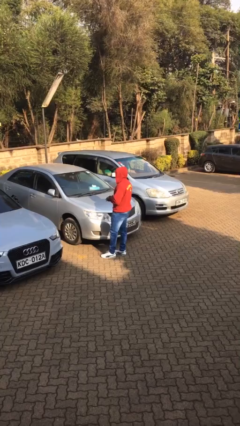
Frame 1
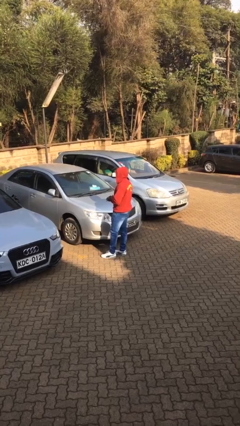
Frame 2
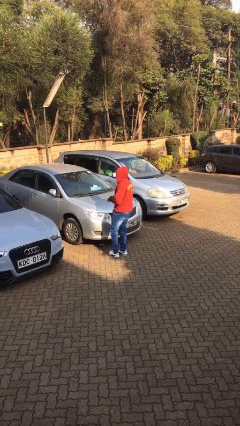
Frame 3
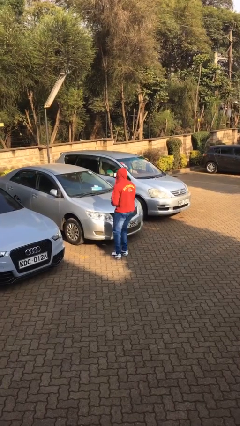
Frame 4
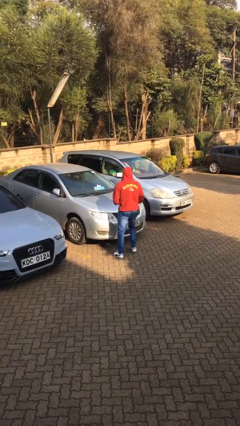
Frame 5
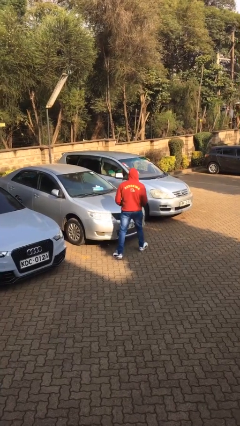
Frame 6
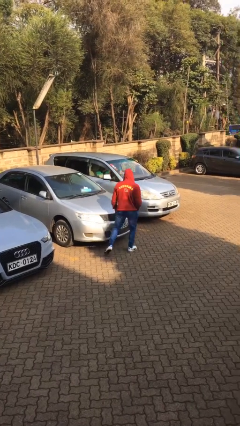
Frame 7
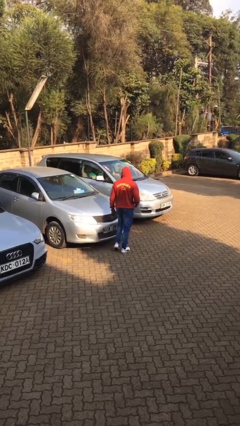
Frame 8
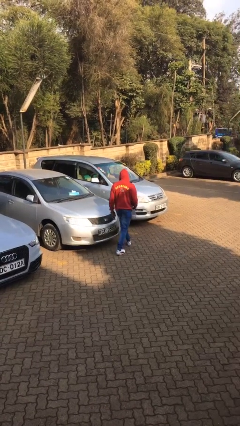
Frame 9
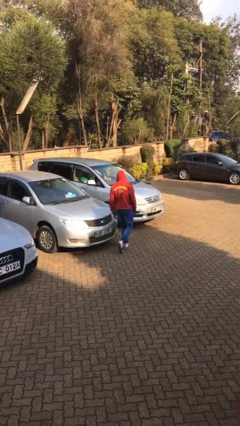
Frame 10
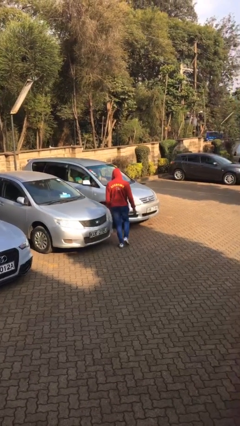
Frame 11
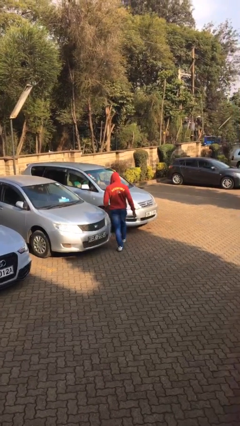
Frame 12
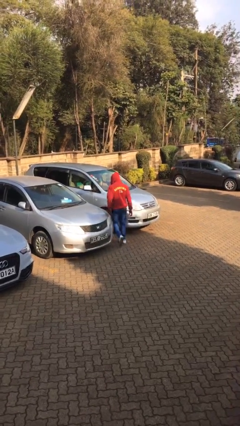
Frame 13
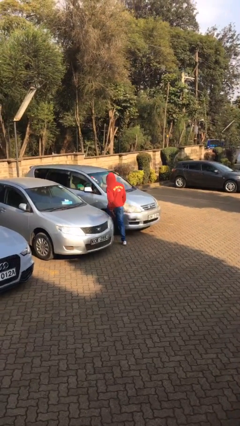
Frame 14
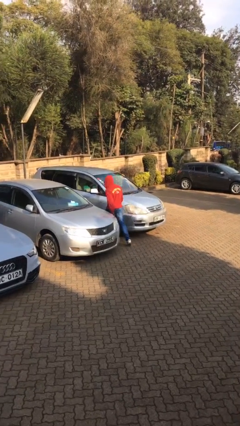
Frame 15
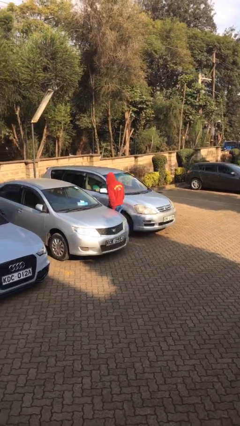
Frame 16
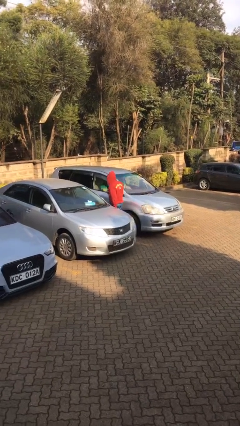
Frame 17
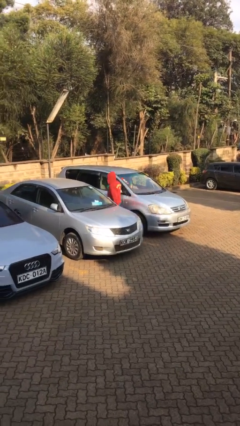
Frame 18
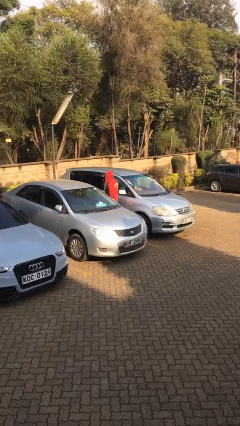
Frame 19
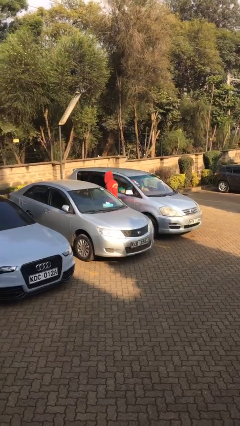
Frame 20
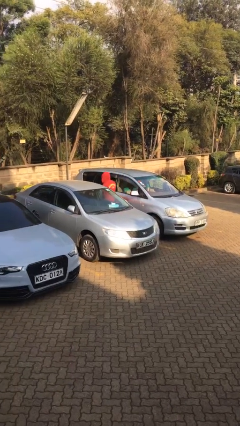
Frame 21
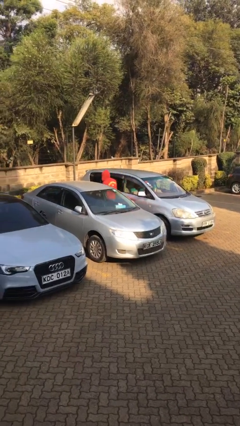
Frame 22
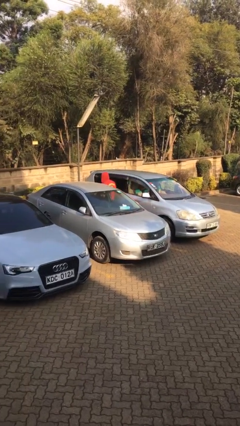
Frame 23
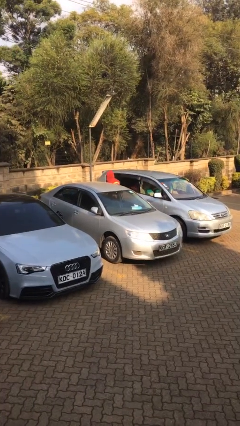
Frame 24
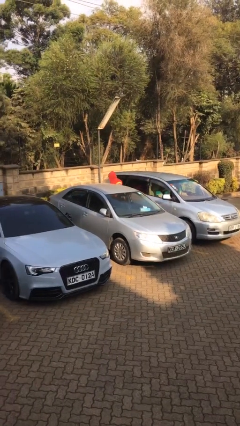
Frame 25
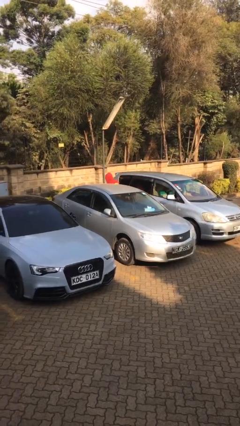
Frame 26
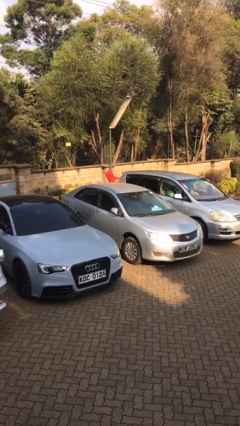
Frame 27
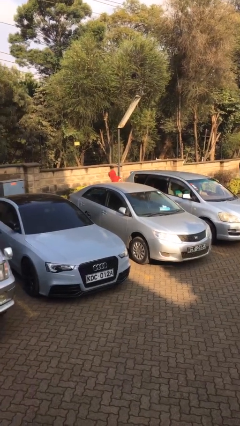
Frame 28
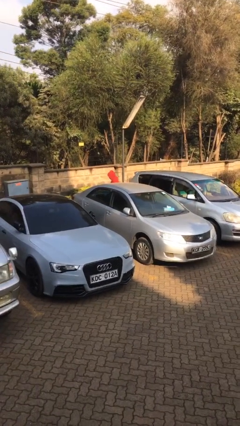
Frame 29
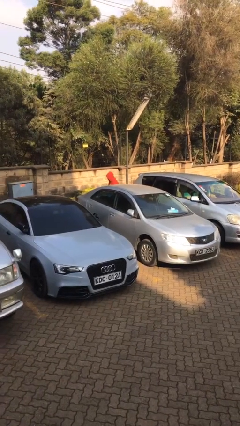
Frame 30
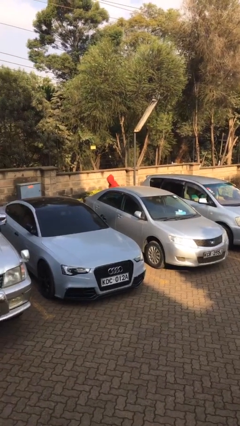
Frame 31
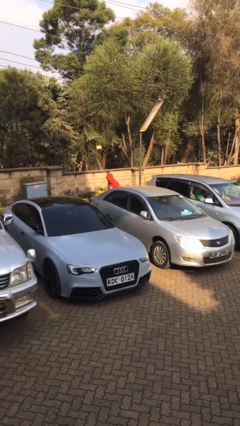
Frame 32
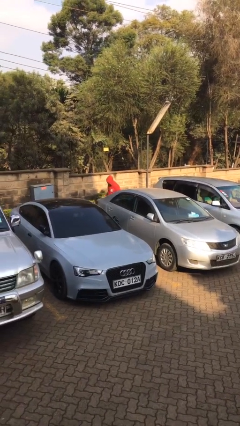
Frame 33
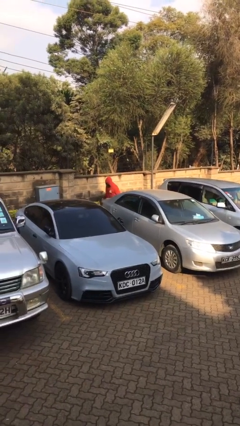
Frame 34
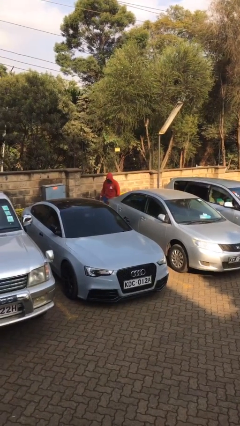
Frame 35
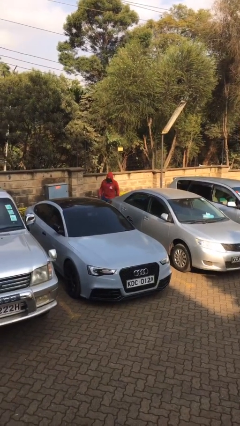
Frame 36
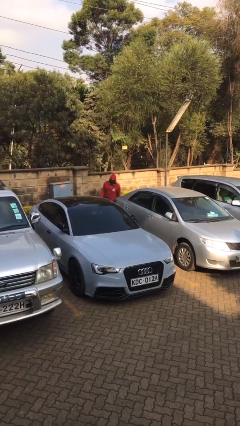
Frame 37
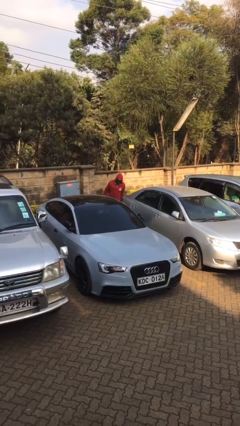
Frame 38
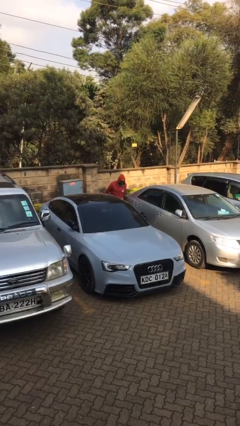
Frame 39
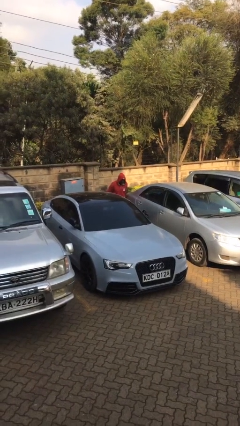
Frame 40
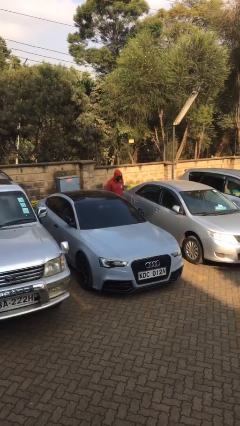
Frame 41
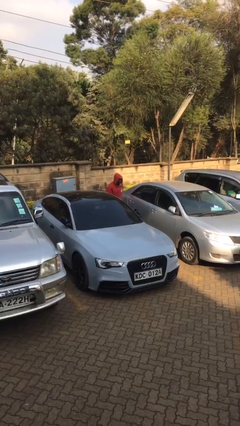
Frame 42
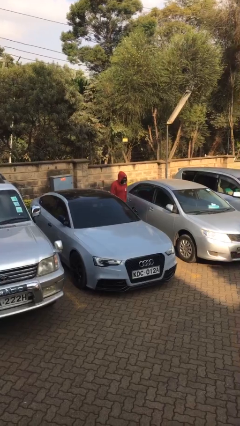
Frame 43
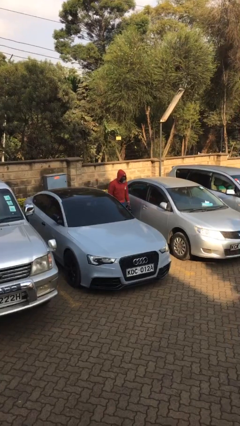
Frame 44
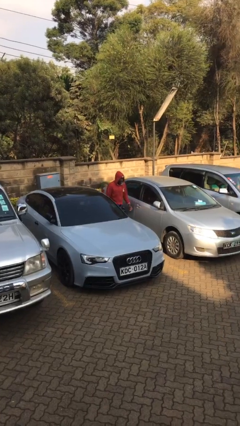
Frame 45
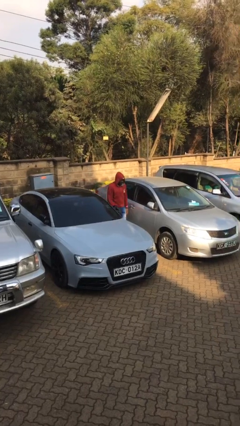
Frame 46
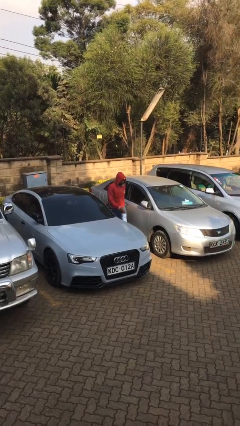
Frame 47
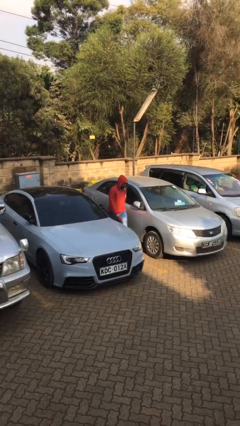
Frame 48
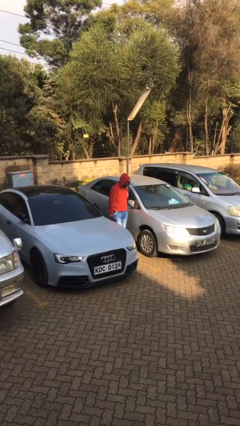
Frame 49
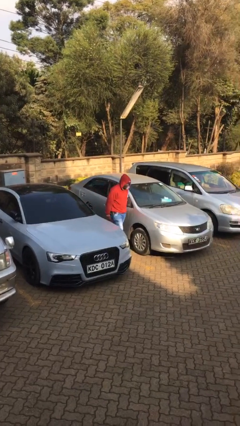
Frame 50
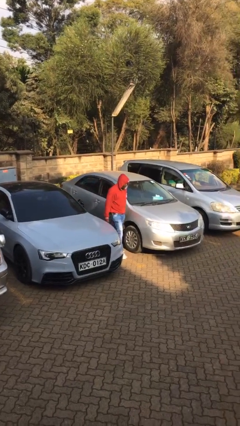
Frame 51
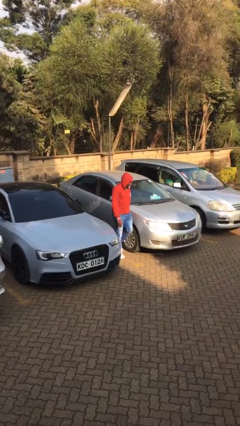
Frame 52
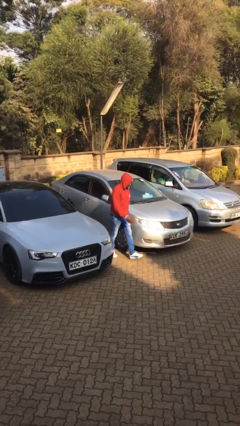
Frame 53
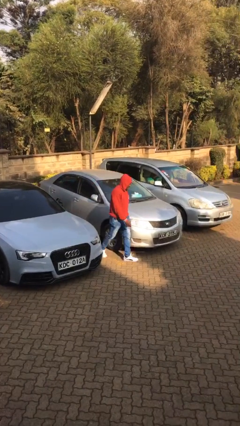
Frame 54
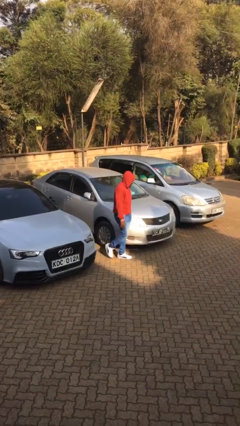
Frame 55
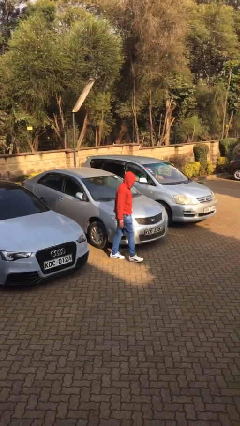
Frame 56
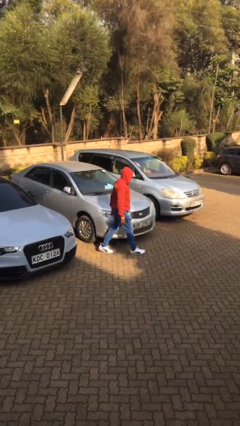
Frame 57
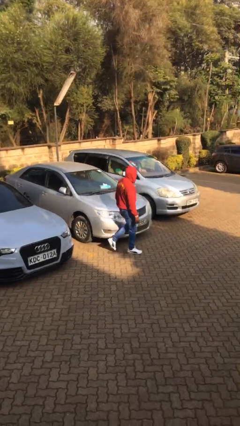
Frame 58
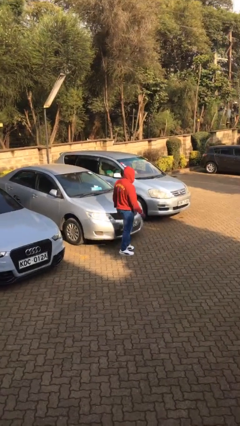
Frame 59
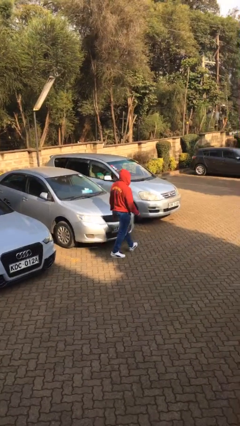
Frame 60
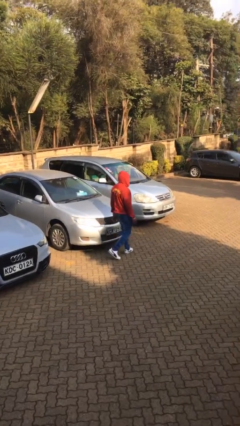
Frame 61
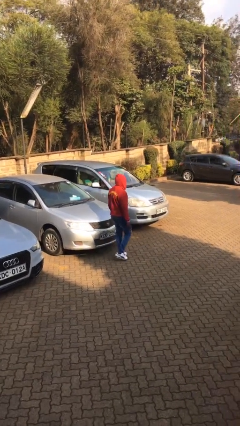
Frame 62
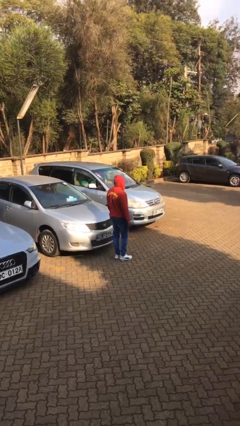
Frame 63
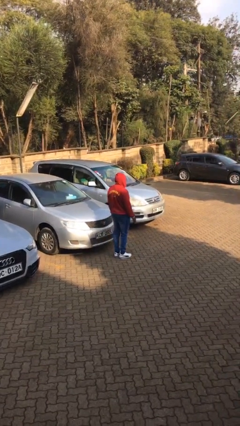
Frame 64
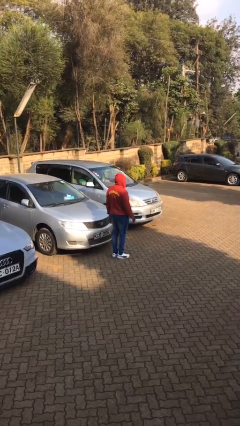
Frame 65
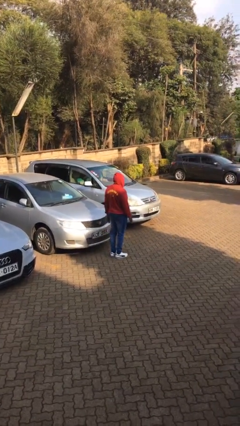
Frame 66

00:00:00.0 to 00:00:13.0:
person walks around car

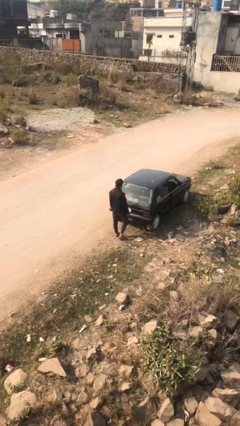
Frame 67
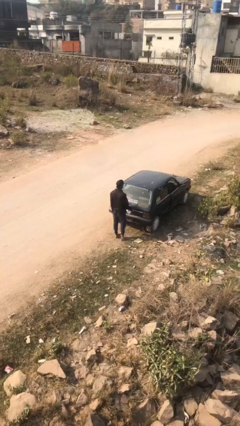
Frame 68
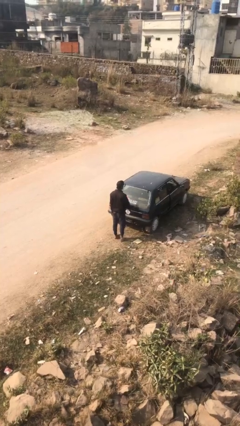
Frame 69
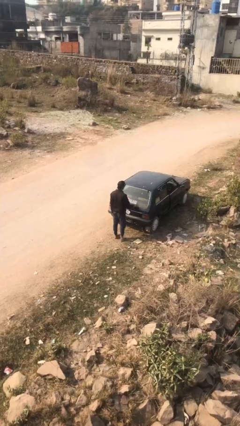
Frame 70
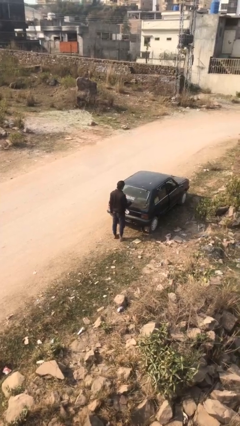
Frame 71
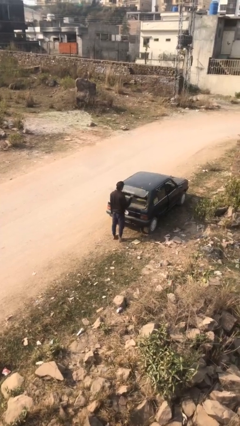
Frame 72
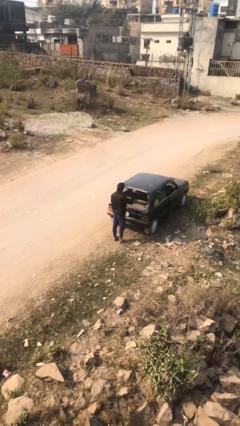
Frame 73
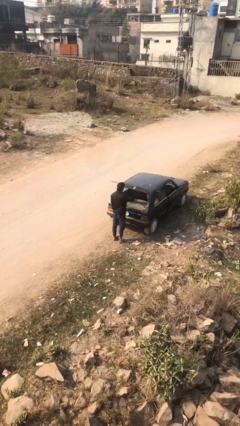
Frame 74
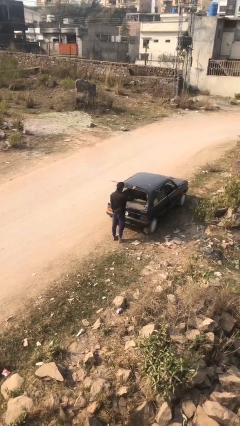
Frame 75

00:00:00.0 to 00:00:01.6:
person opens car trunk

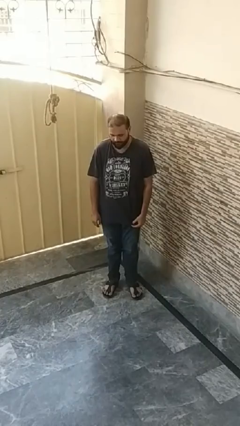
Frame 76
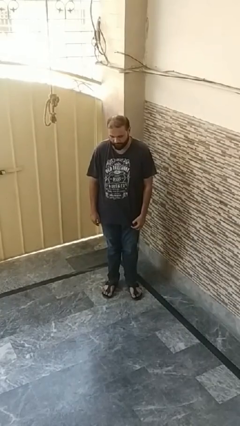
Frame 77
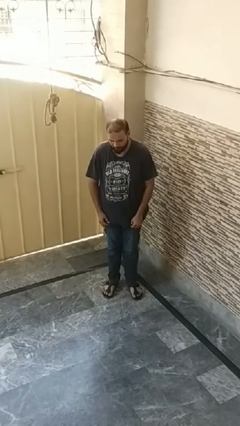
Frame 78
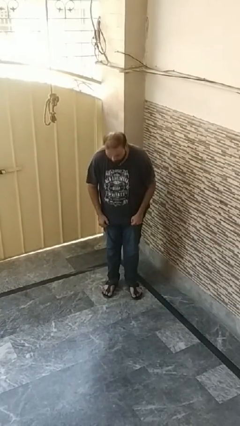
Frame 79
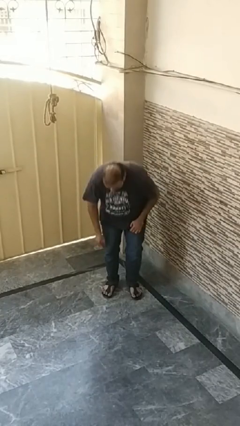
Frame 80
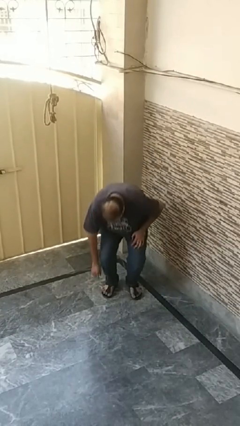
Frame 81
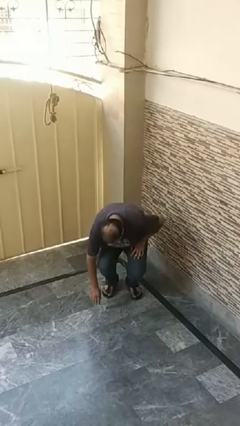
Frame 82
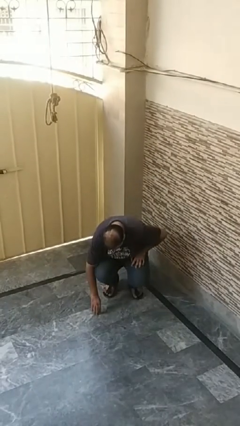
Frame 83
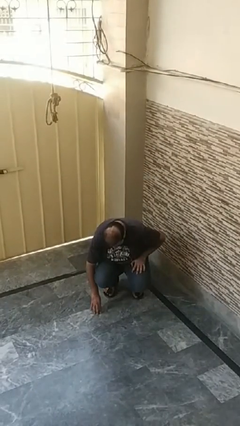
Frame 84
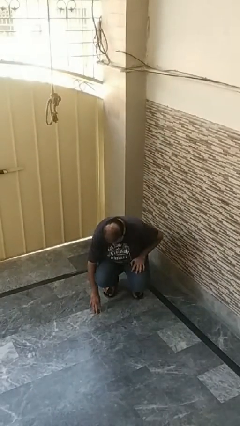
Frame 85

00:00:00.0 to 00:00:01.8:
person falls while standing

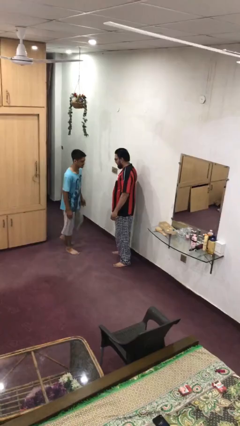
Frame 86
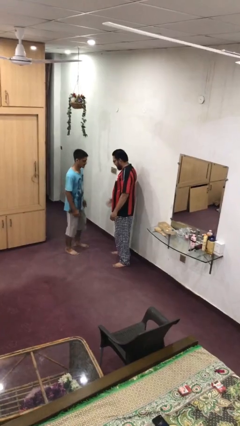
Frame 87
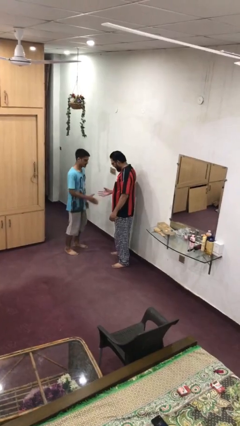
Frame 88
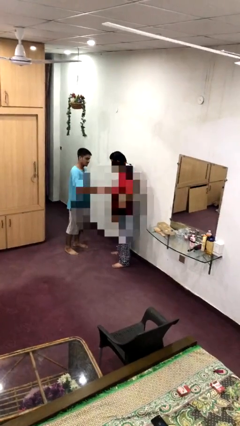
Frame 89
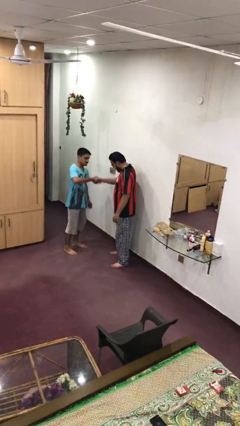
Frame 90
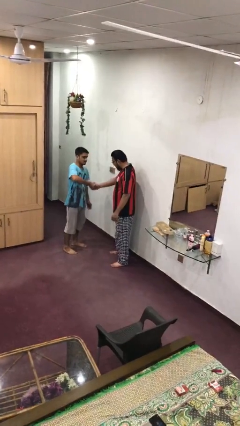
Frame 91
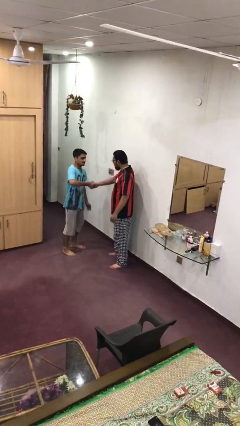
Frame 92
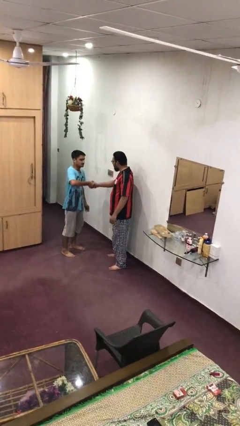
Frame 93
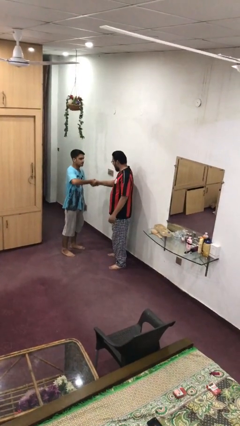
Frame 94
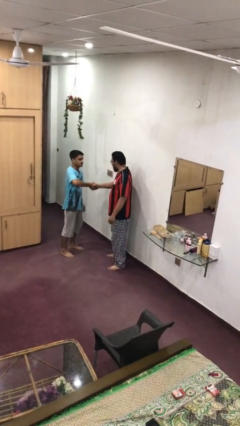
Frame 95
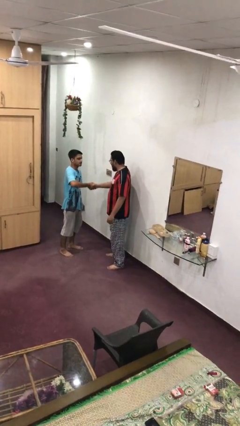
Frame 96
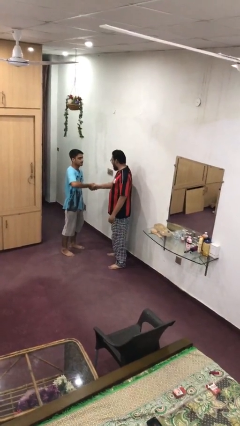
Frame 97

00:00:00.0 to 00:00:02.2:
person shakes hand
